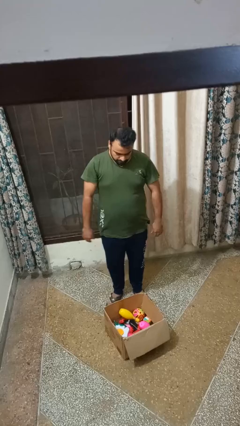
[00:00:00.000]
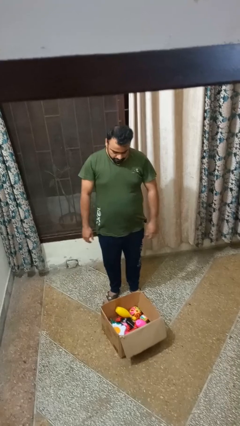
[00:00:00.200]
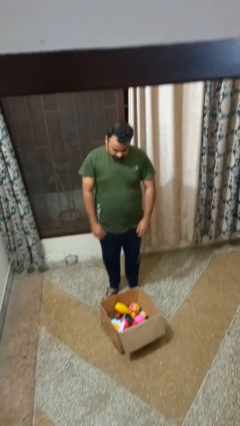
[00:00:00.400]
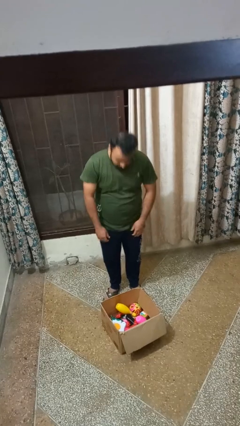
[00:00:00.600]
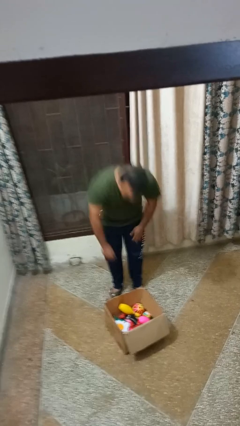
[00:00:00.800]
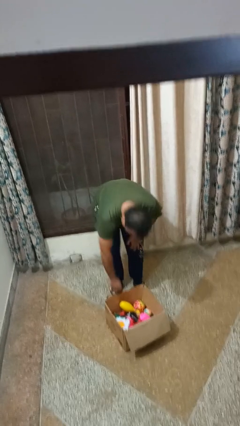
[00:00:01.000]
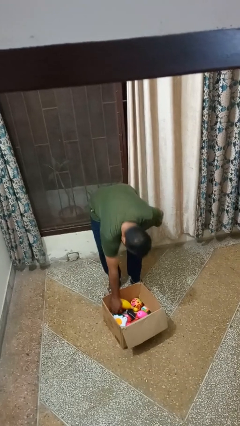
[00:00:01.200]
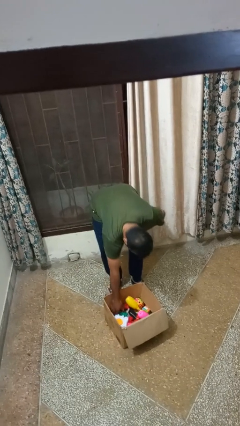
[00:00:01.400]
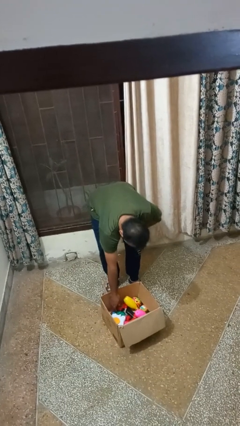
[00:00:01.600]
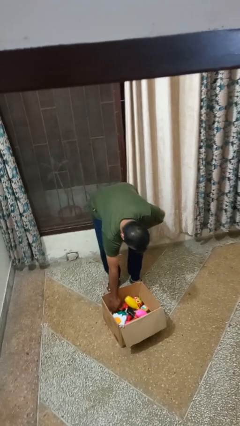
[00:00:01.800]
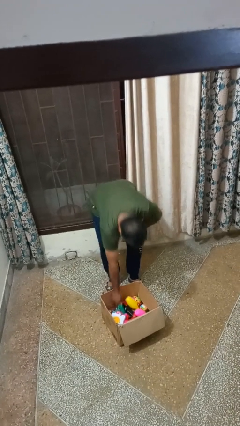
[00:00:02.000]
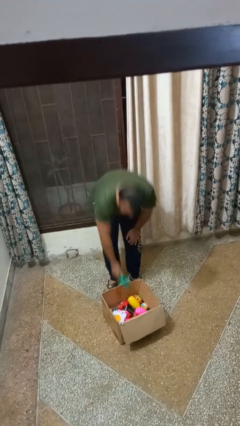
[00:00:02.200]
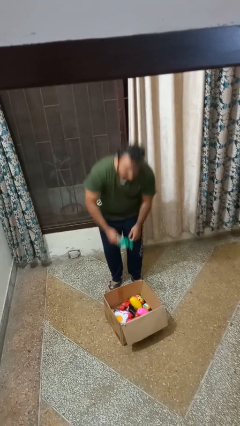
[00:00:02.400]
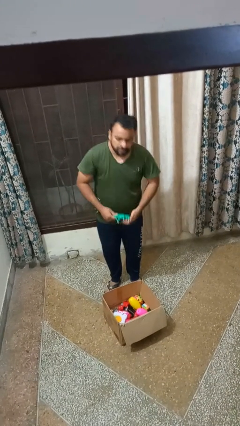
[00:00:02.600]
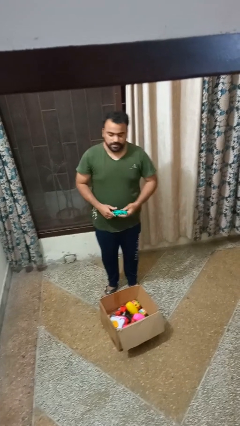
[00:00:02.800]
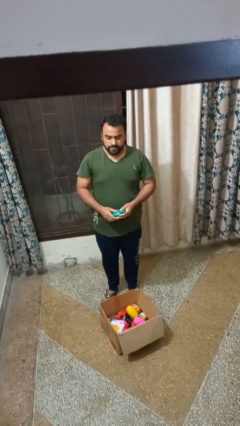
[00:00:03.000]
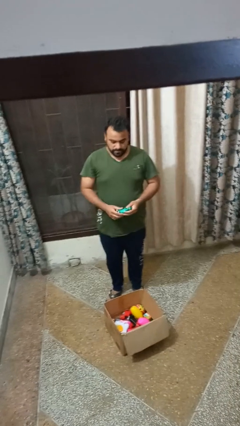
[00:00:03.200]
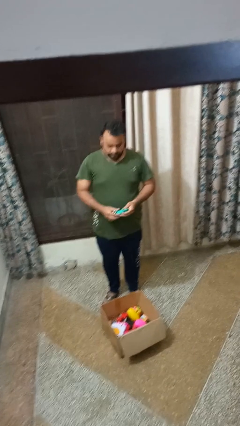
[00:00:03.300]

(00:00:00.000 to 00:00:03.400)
person takes object from box

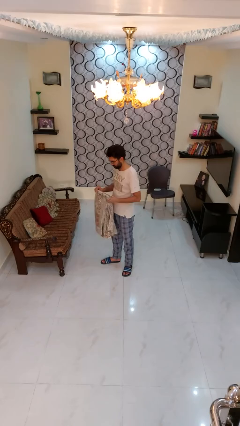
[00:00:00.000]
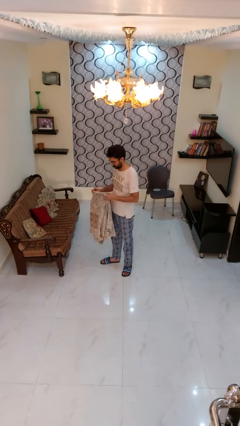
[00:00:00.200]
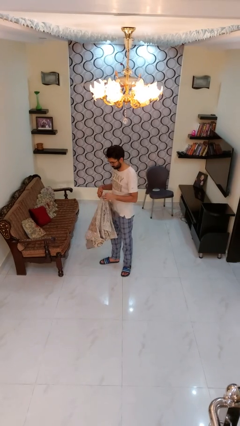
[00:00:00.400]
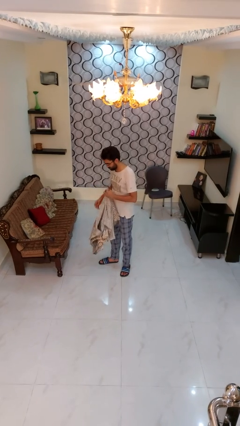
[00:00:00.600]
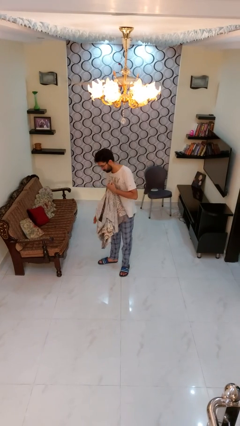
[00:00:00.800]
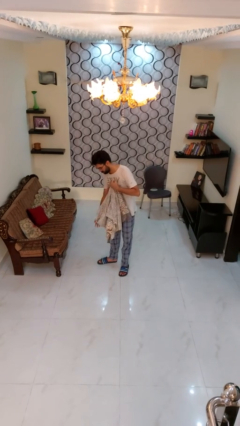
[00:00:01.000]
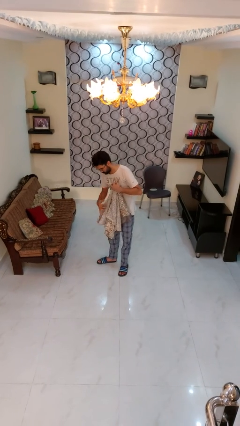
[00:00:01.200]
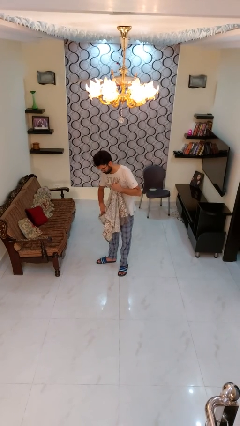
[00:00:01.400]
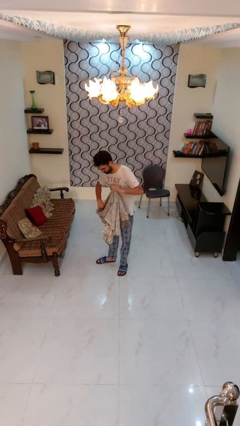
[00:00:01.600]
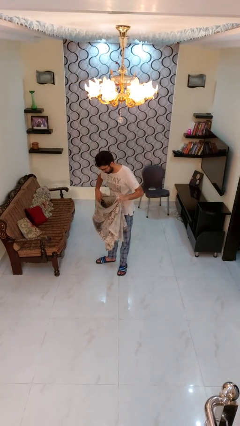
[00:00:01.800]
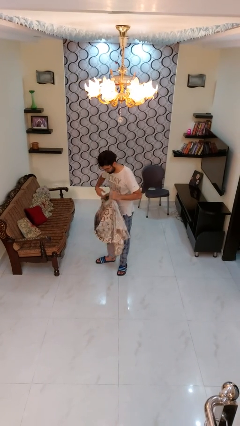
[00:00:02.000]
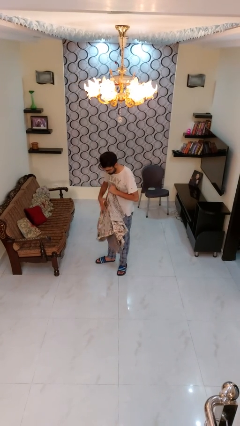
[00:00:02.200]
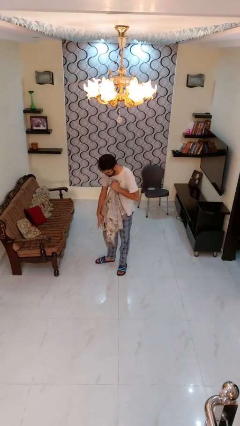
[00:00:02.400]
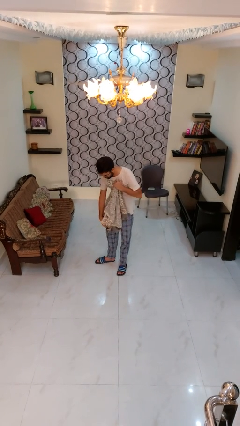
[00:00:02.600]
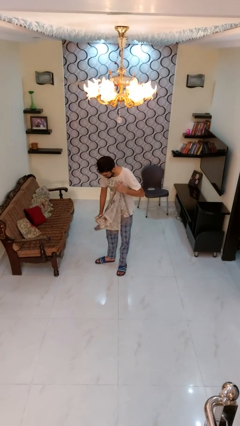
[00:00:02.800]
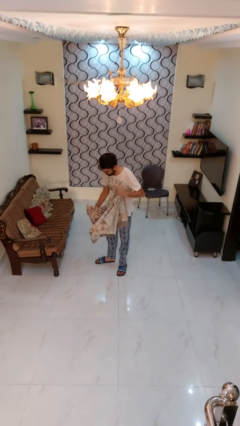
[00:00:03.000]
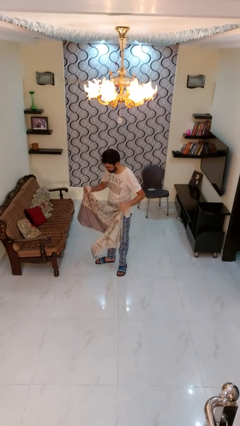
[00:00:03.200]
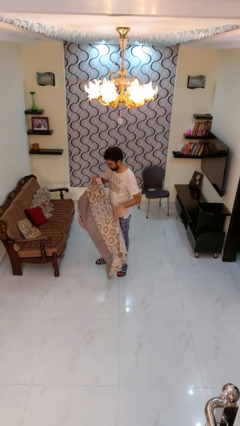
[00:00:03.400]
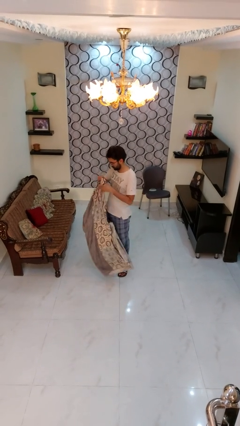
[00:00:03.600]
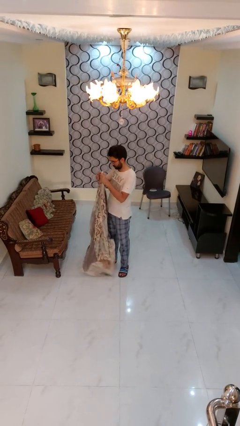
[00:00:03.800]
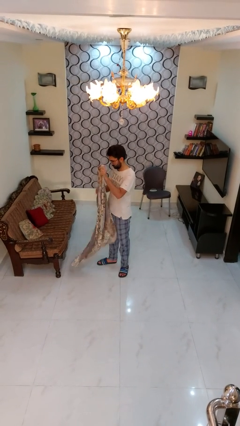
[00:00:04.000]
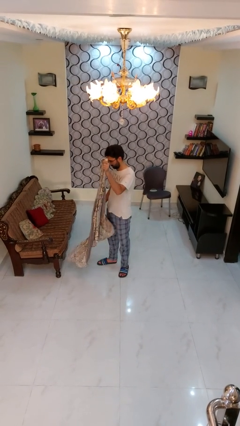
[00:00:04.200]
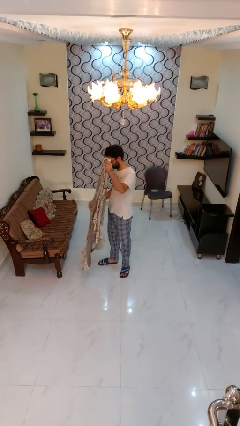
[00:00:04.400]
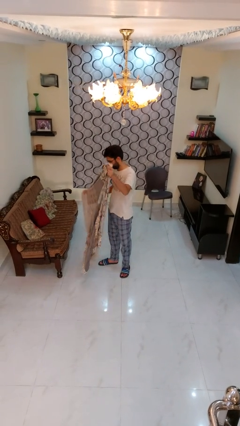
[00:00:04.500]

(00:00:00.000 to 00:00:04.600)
person unfolds blanket

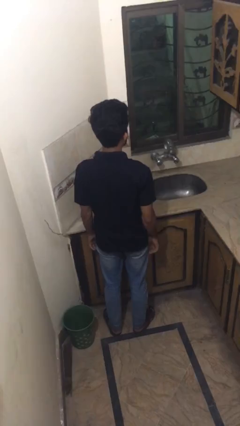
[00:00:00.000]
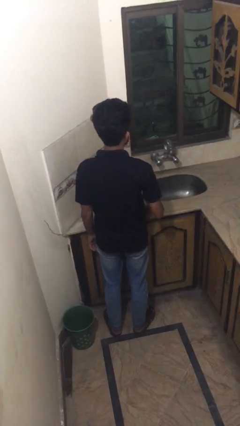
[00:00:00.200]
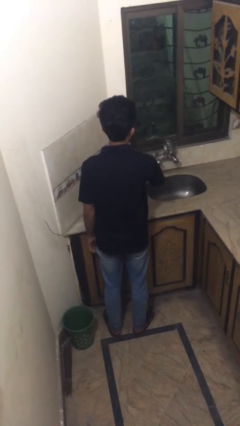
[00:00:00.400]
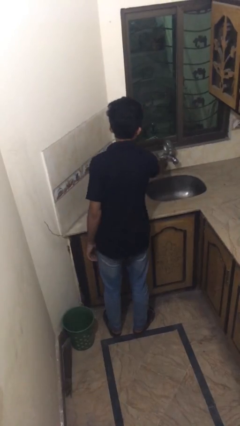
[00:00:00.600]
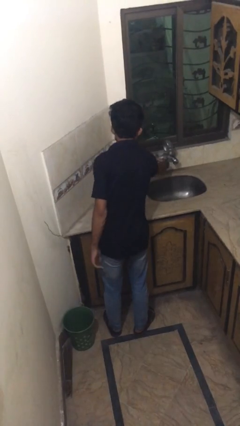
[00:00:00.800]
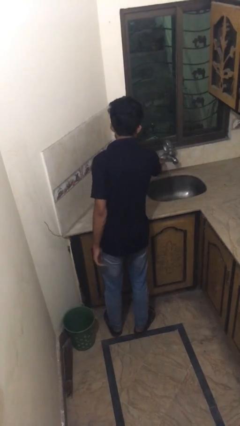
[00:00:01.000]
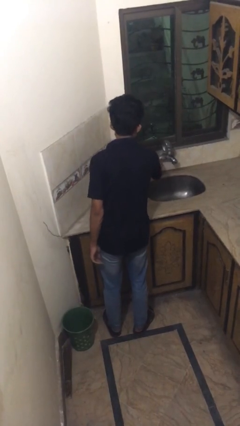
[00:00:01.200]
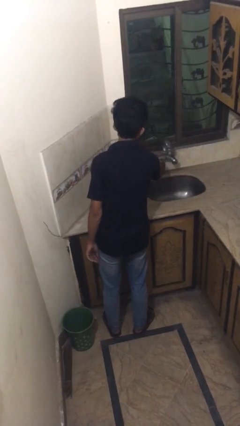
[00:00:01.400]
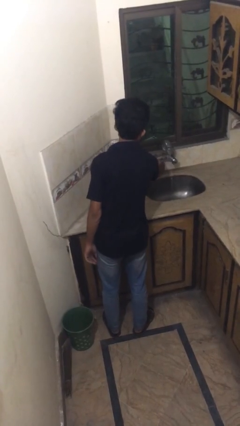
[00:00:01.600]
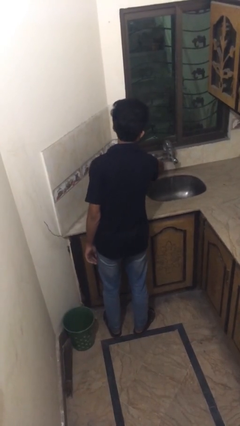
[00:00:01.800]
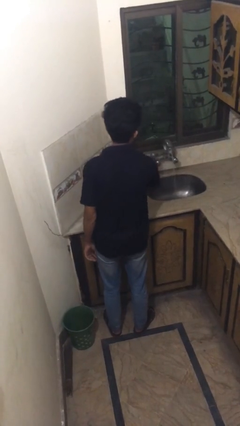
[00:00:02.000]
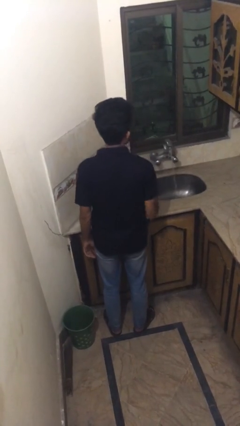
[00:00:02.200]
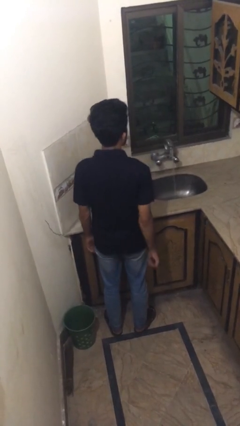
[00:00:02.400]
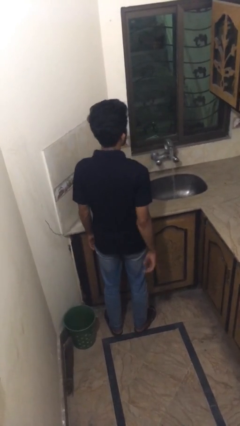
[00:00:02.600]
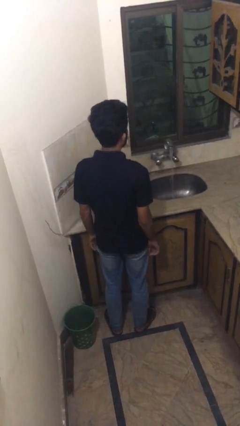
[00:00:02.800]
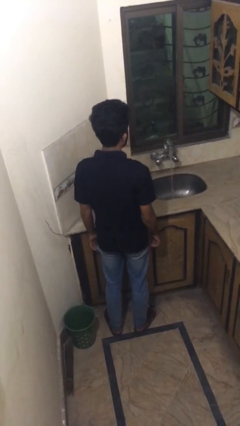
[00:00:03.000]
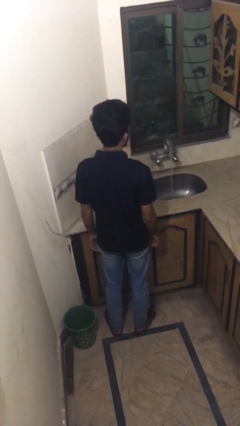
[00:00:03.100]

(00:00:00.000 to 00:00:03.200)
person turns on faucet

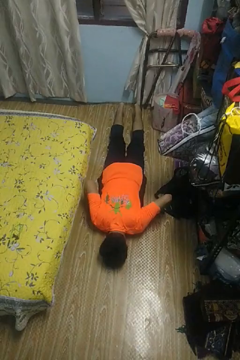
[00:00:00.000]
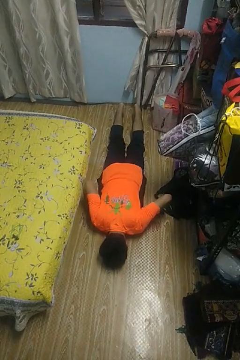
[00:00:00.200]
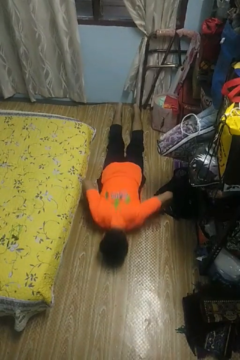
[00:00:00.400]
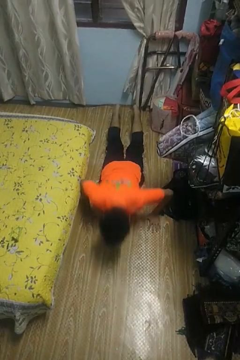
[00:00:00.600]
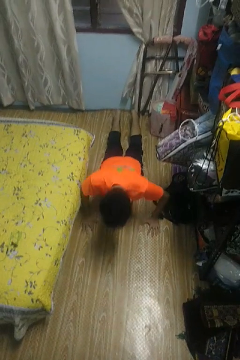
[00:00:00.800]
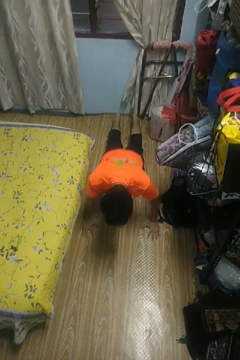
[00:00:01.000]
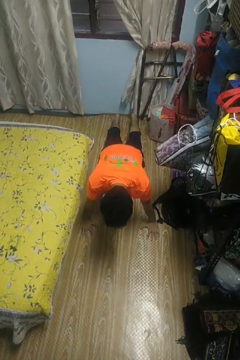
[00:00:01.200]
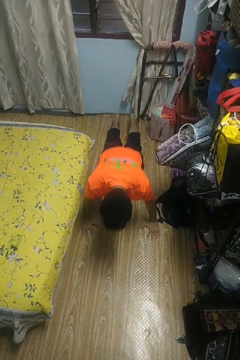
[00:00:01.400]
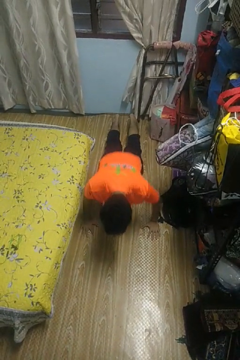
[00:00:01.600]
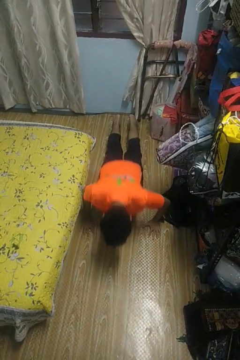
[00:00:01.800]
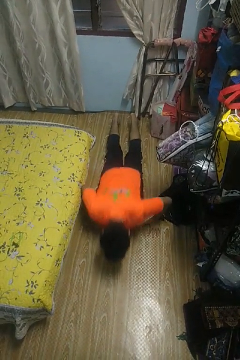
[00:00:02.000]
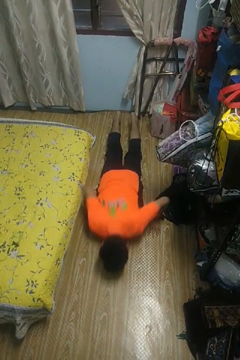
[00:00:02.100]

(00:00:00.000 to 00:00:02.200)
person exercises with pushup

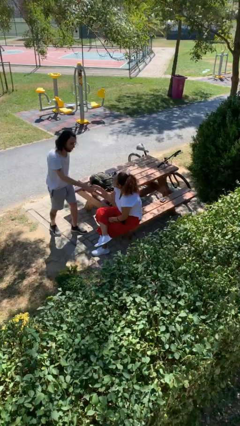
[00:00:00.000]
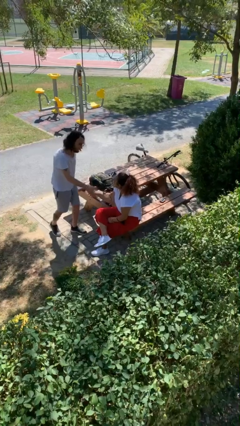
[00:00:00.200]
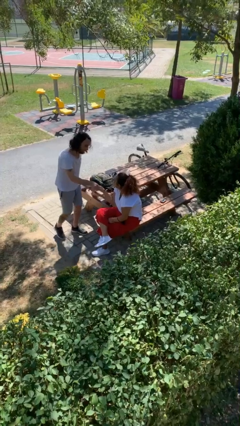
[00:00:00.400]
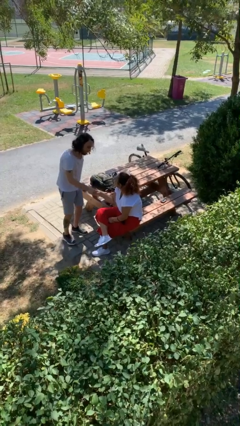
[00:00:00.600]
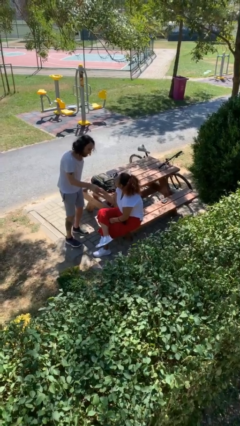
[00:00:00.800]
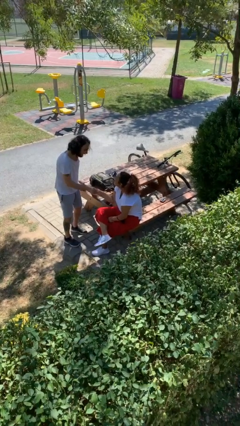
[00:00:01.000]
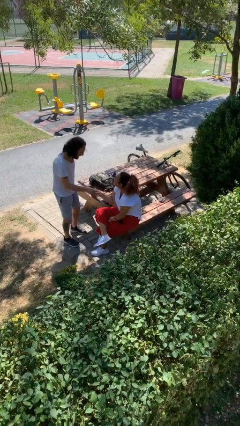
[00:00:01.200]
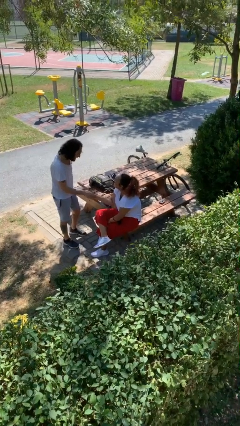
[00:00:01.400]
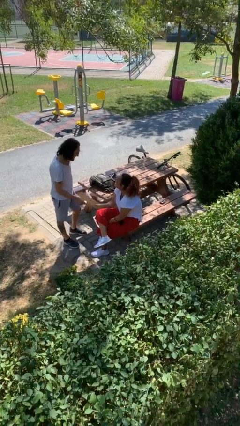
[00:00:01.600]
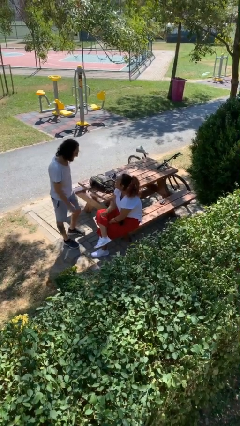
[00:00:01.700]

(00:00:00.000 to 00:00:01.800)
person shakes hand

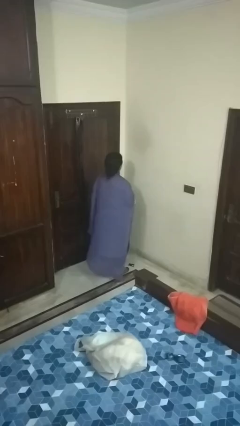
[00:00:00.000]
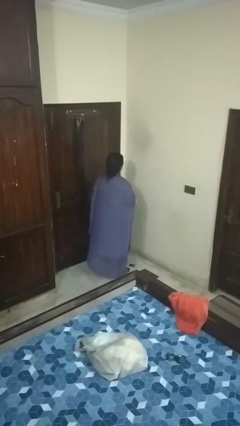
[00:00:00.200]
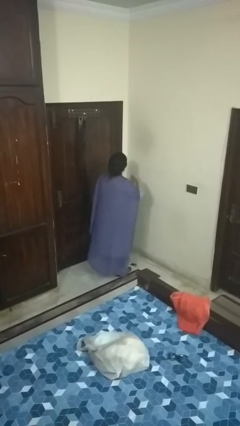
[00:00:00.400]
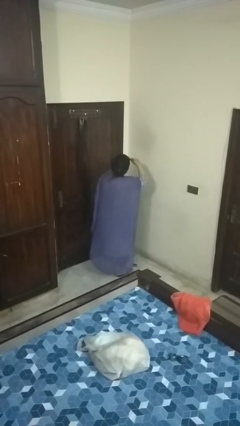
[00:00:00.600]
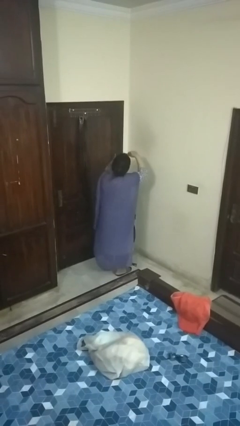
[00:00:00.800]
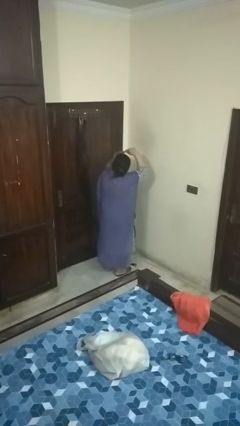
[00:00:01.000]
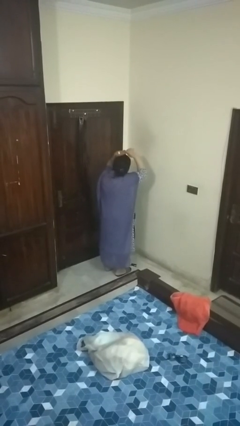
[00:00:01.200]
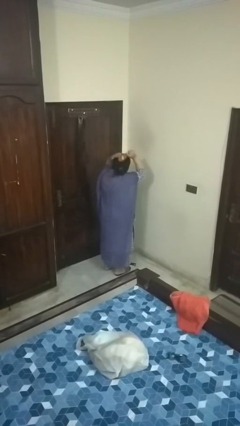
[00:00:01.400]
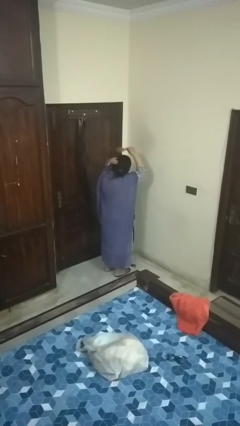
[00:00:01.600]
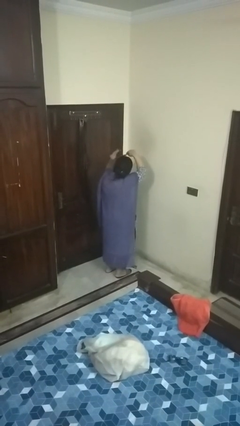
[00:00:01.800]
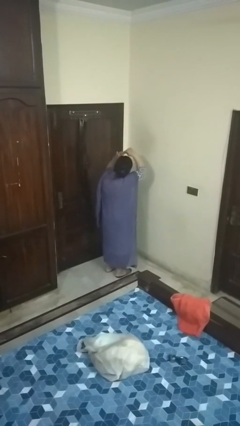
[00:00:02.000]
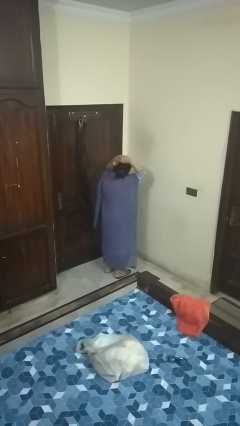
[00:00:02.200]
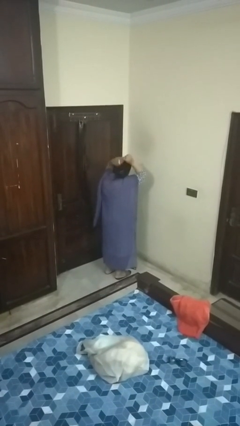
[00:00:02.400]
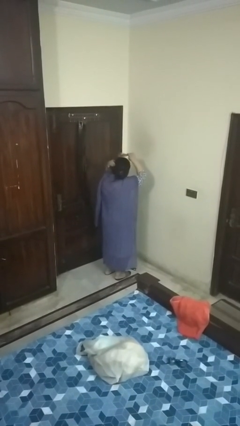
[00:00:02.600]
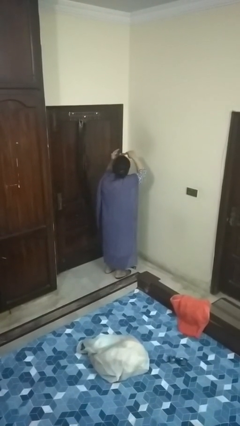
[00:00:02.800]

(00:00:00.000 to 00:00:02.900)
person brushes hair
